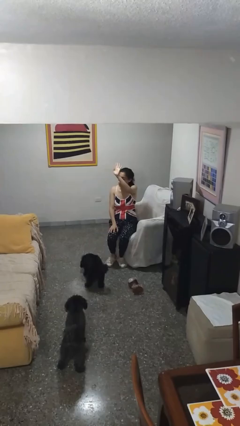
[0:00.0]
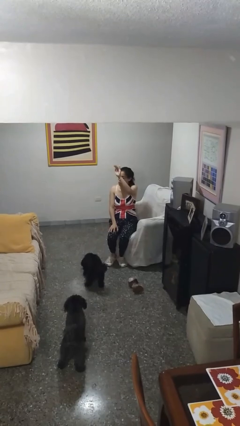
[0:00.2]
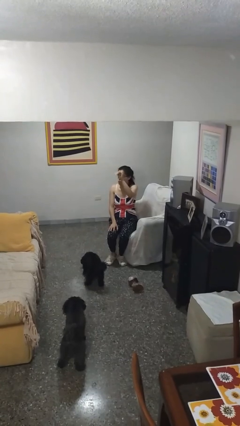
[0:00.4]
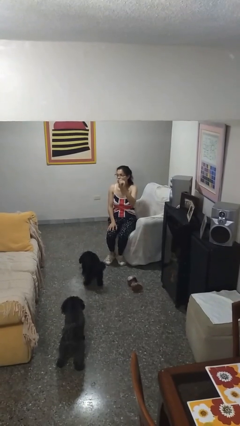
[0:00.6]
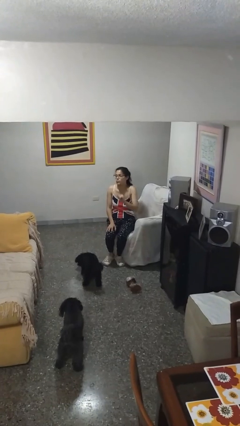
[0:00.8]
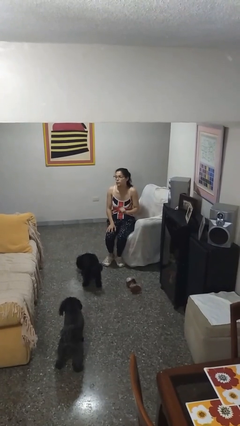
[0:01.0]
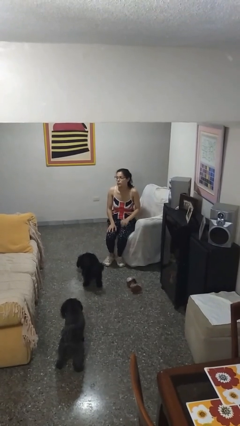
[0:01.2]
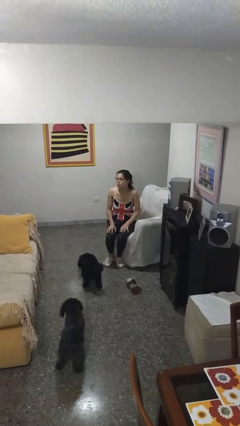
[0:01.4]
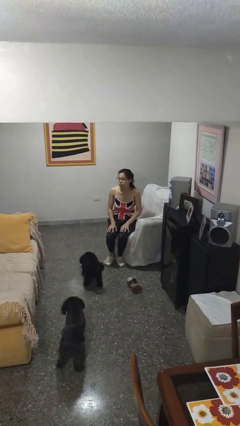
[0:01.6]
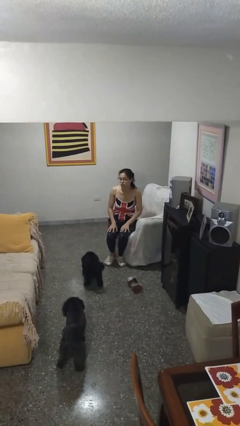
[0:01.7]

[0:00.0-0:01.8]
person gestures lower hand

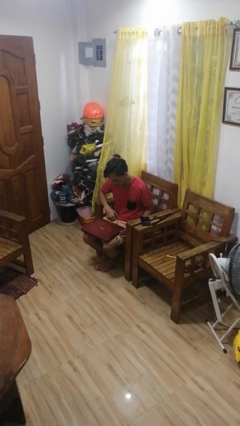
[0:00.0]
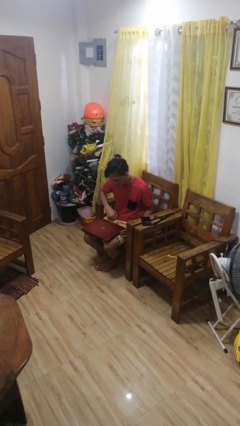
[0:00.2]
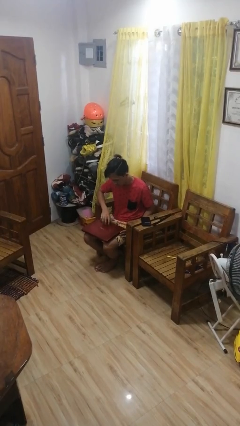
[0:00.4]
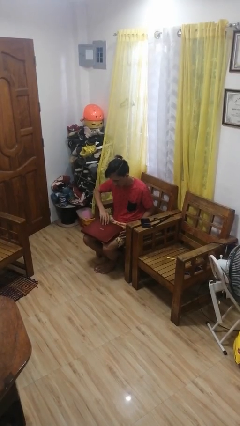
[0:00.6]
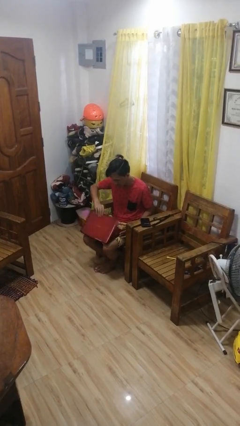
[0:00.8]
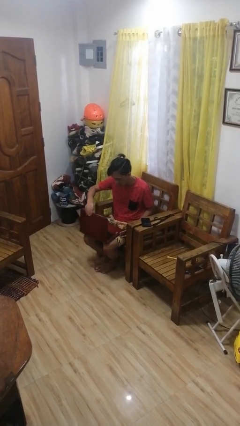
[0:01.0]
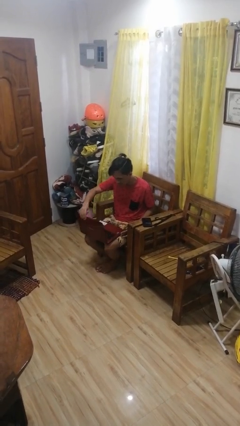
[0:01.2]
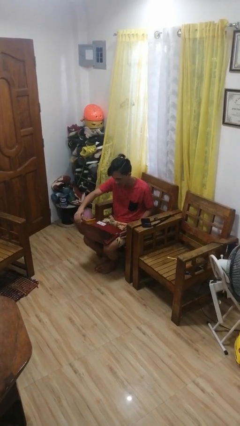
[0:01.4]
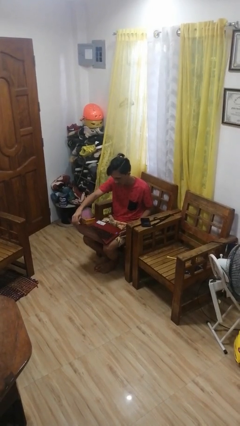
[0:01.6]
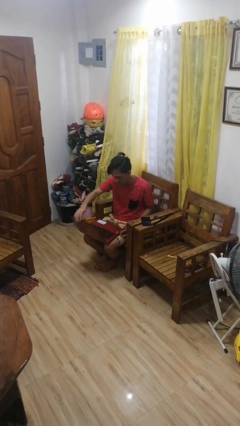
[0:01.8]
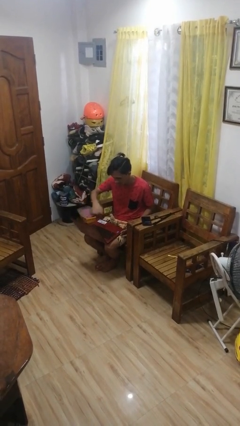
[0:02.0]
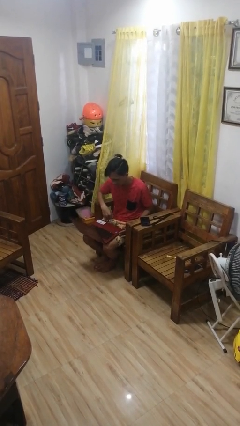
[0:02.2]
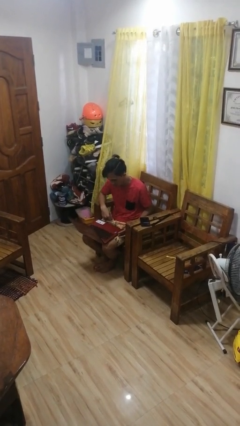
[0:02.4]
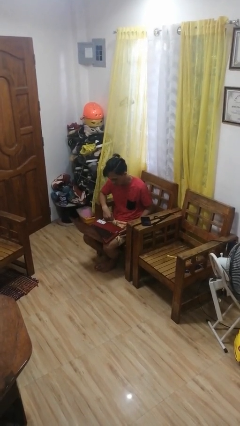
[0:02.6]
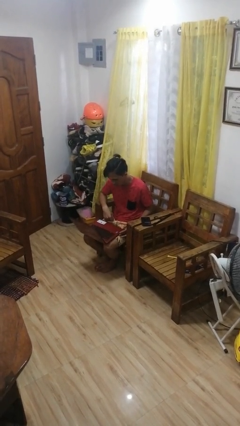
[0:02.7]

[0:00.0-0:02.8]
person opens laptop

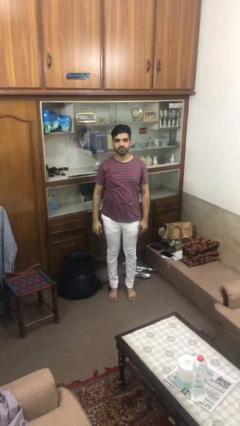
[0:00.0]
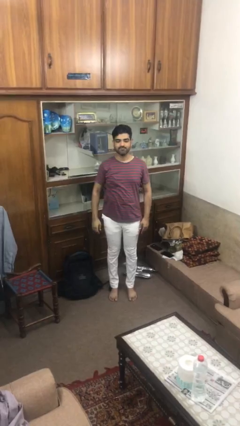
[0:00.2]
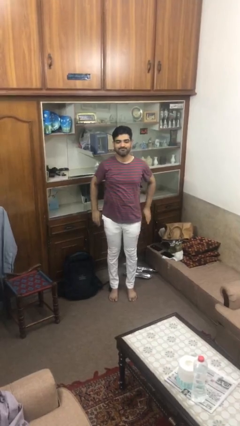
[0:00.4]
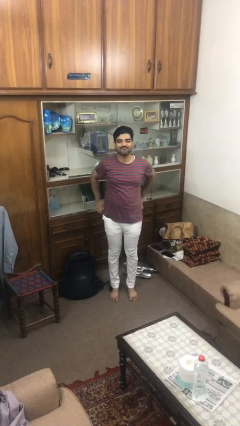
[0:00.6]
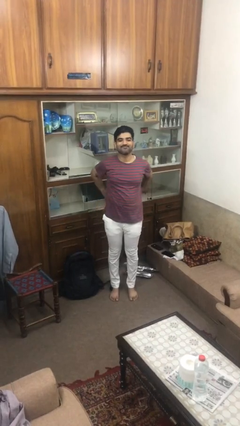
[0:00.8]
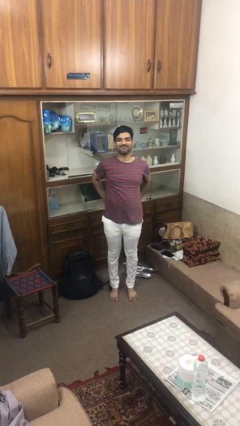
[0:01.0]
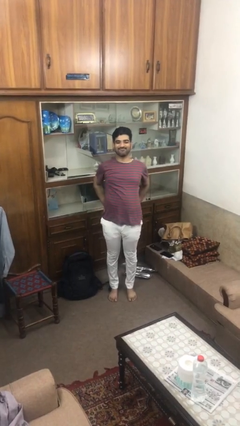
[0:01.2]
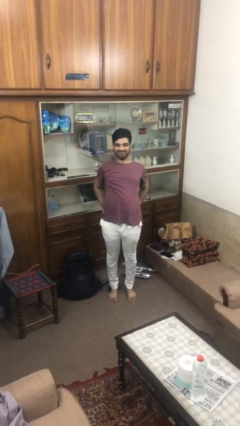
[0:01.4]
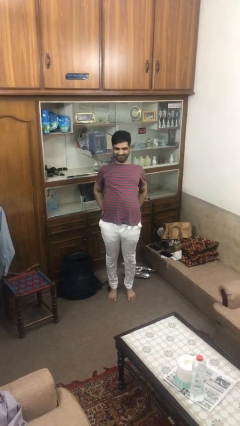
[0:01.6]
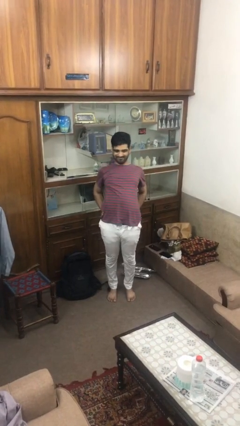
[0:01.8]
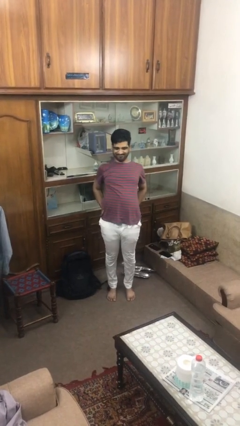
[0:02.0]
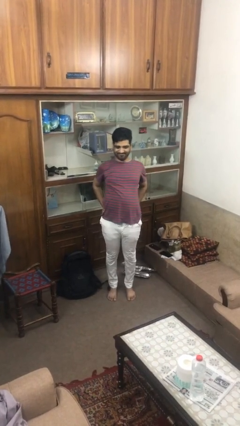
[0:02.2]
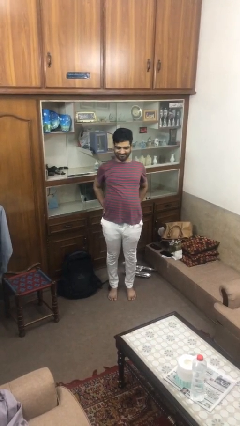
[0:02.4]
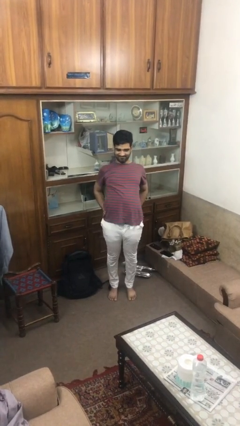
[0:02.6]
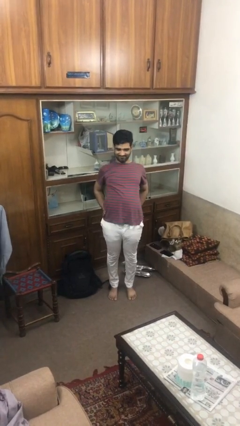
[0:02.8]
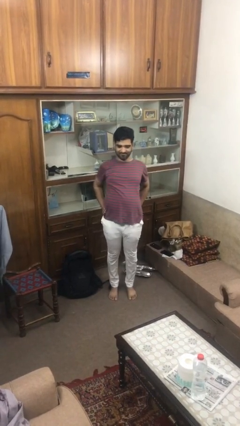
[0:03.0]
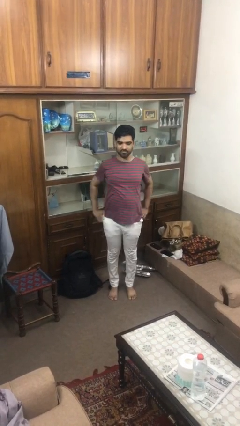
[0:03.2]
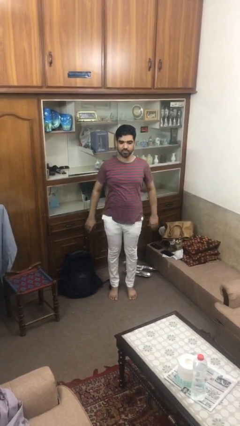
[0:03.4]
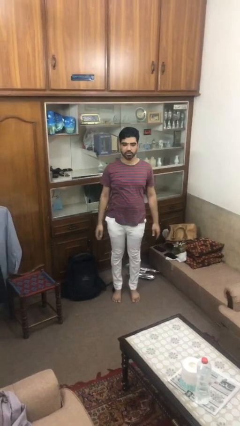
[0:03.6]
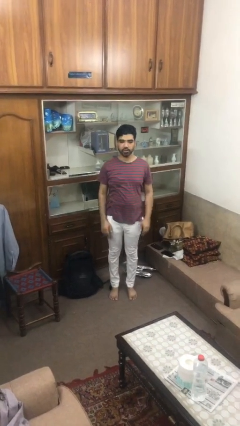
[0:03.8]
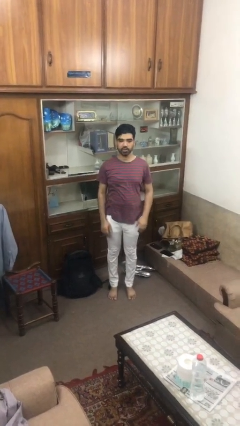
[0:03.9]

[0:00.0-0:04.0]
person stretches back

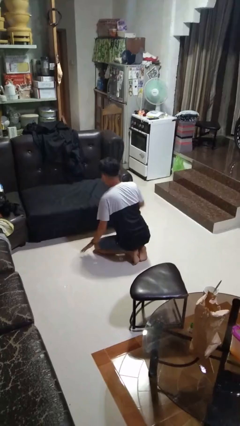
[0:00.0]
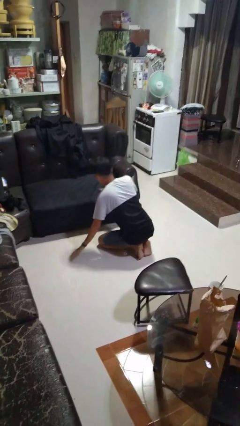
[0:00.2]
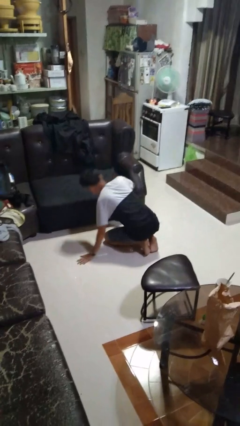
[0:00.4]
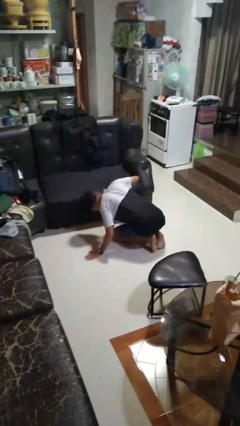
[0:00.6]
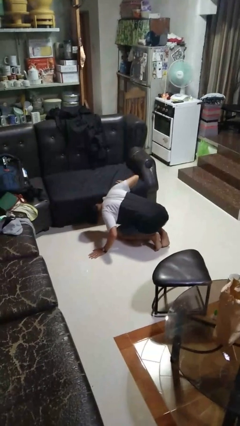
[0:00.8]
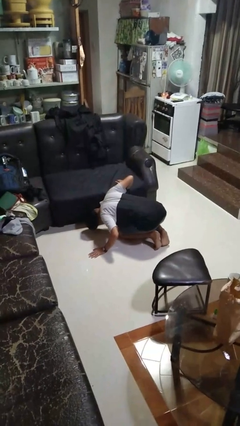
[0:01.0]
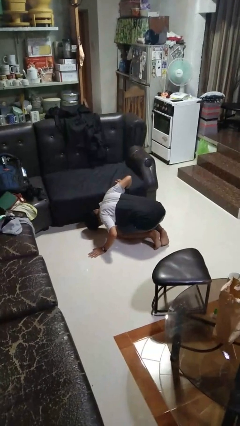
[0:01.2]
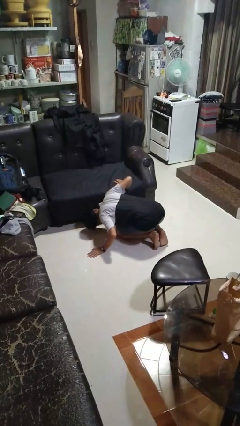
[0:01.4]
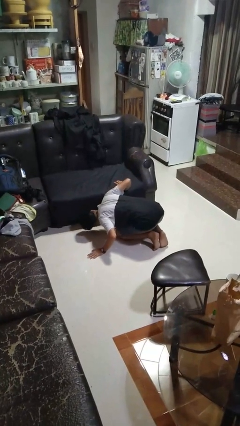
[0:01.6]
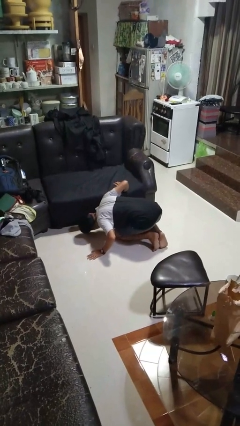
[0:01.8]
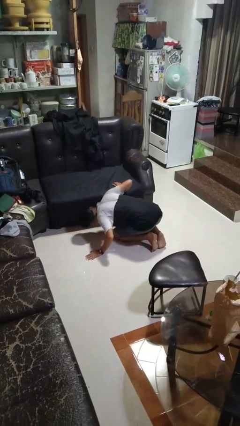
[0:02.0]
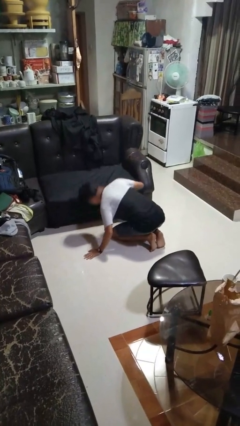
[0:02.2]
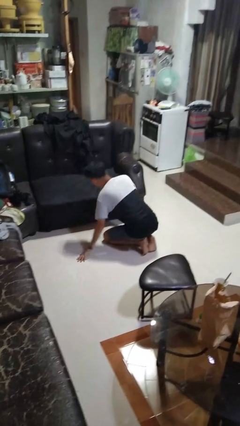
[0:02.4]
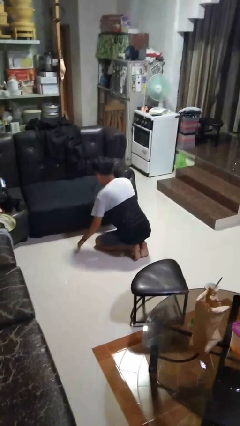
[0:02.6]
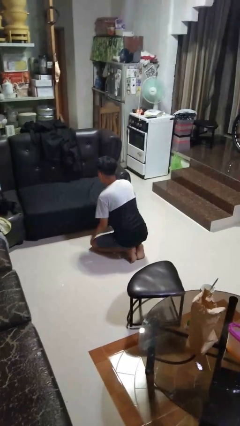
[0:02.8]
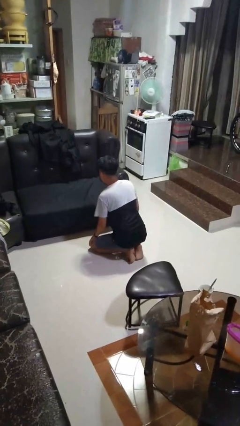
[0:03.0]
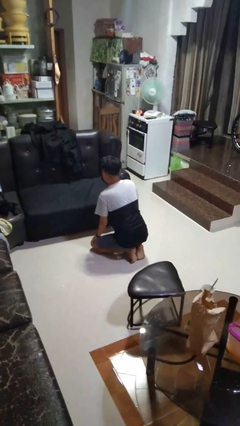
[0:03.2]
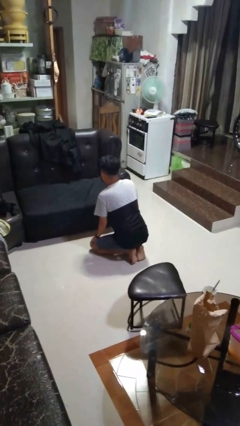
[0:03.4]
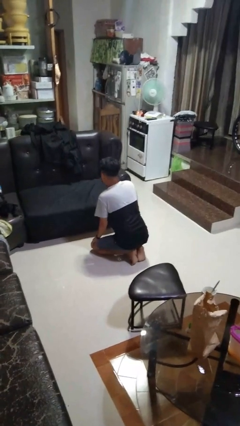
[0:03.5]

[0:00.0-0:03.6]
person searches under couch

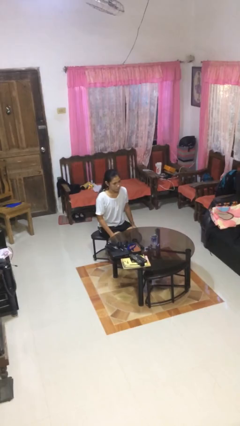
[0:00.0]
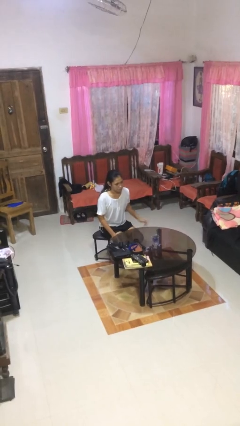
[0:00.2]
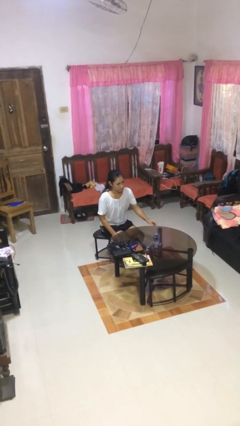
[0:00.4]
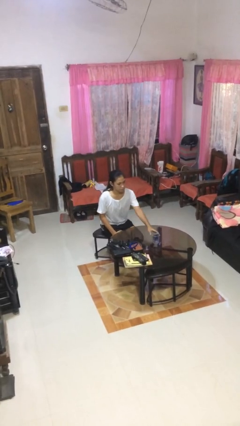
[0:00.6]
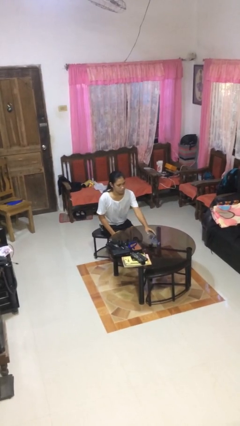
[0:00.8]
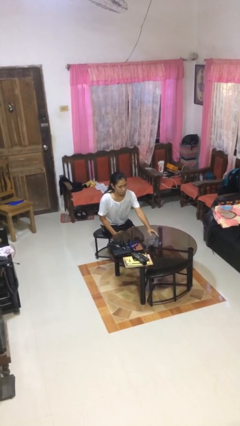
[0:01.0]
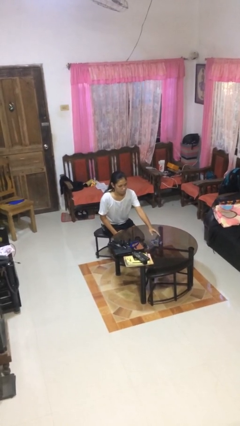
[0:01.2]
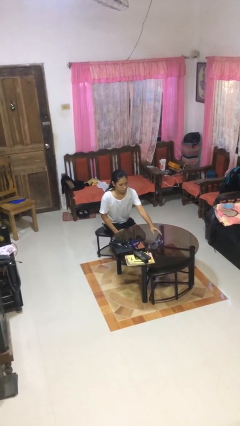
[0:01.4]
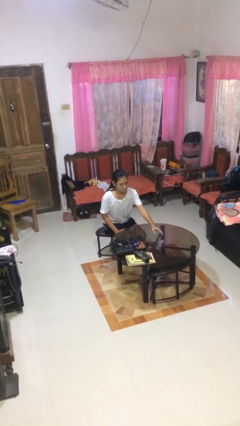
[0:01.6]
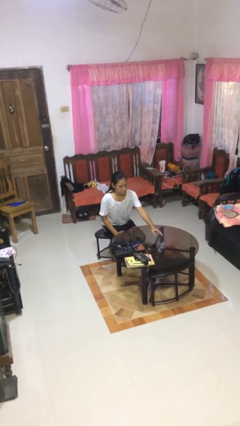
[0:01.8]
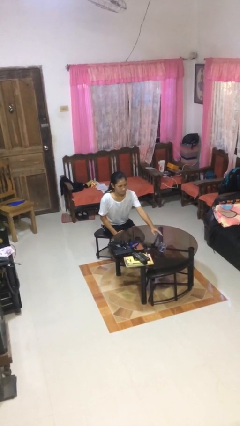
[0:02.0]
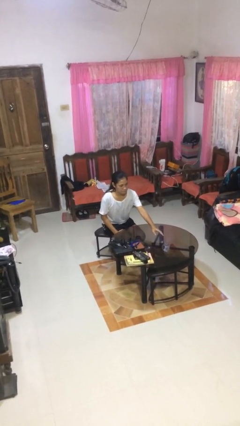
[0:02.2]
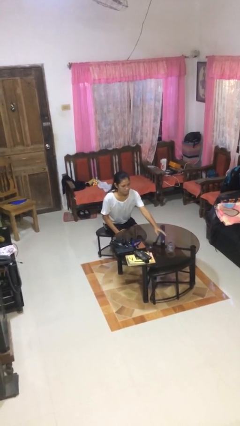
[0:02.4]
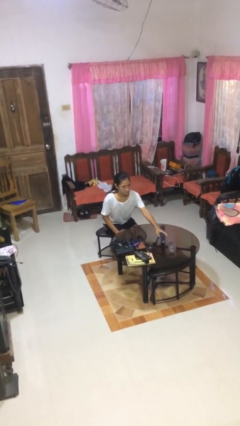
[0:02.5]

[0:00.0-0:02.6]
person knocks over glass

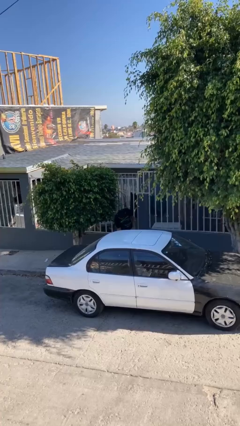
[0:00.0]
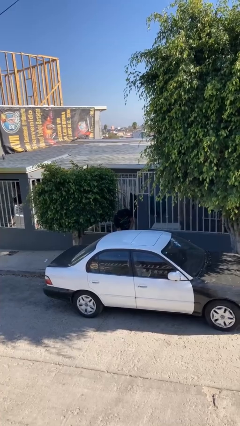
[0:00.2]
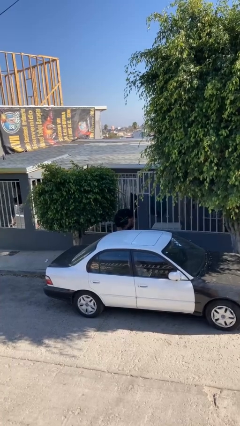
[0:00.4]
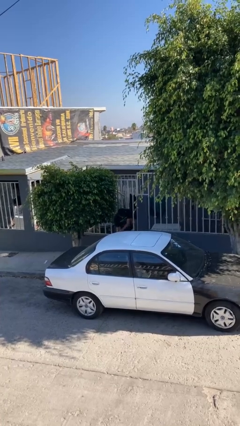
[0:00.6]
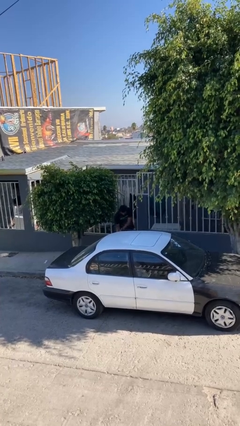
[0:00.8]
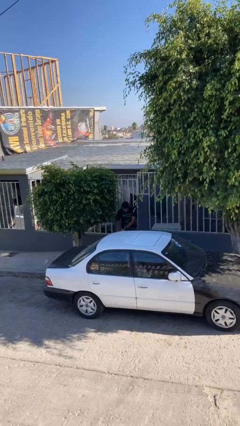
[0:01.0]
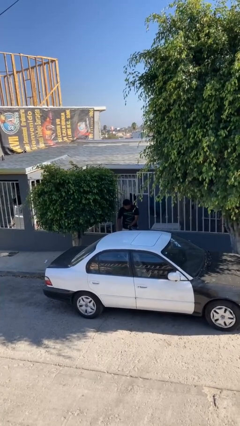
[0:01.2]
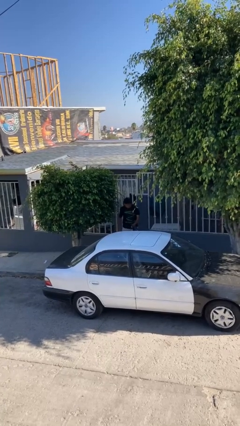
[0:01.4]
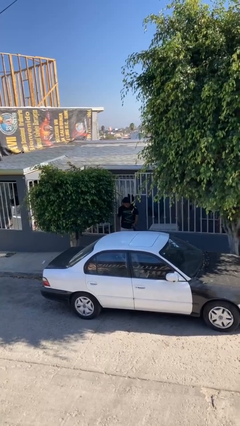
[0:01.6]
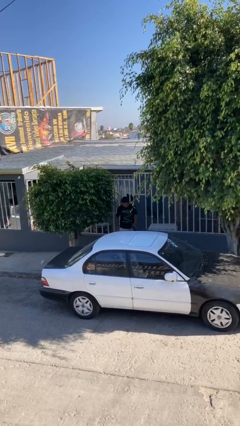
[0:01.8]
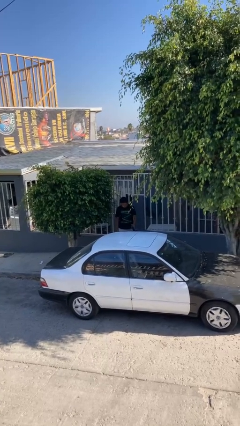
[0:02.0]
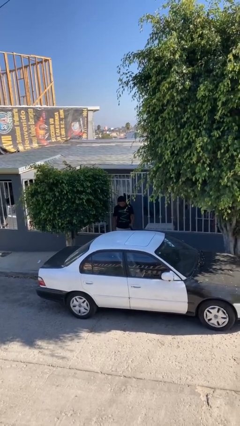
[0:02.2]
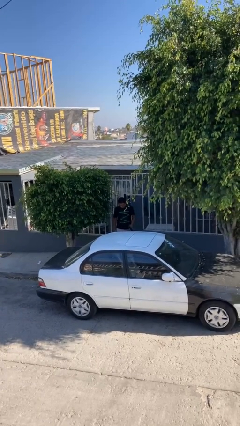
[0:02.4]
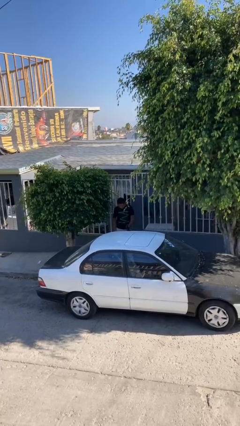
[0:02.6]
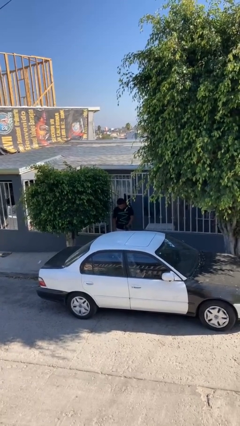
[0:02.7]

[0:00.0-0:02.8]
person opens car door
